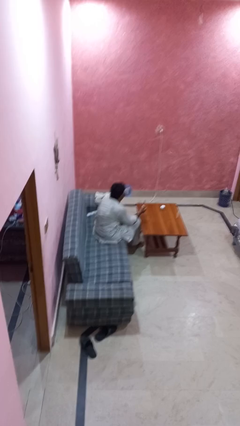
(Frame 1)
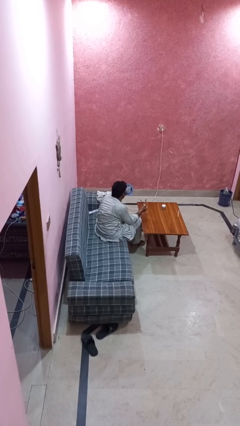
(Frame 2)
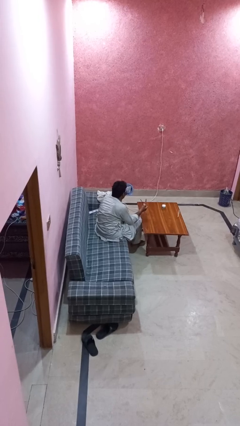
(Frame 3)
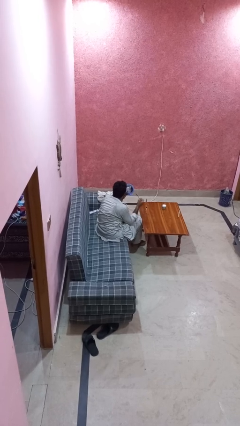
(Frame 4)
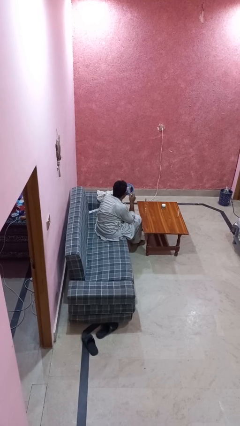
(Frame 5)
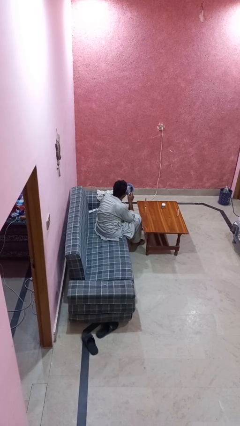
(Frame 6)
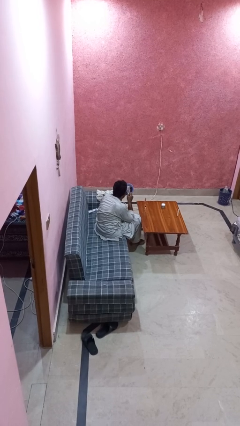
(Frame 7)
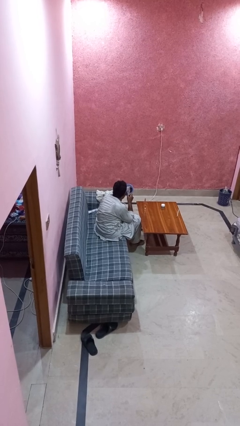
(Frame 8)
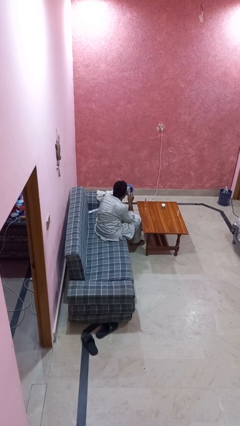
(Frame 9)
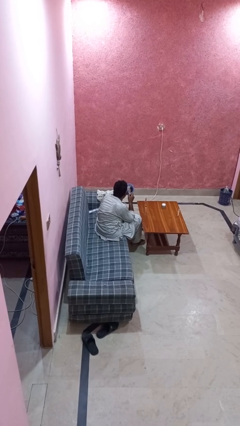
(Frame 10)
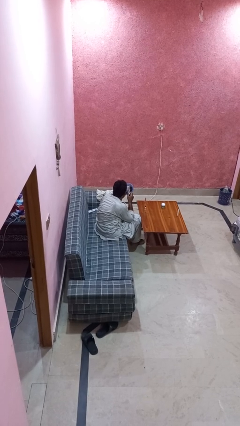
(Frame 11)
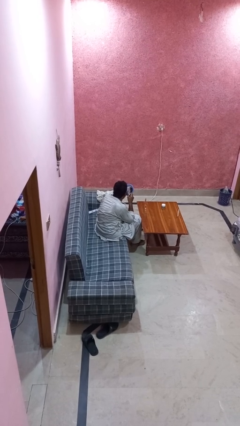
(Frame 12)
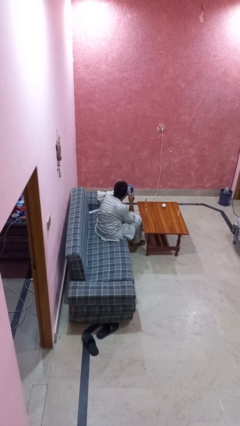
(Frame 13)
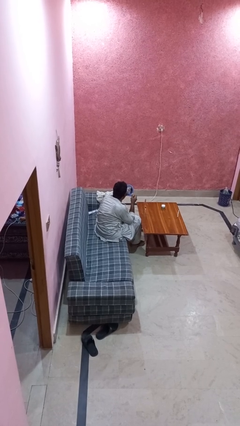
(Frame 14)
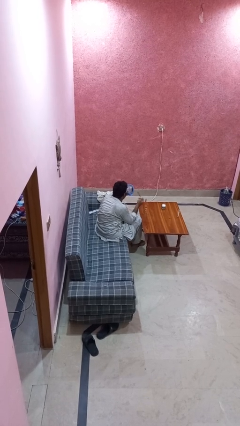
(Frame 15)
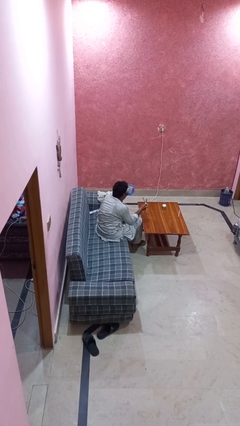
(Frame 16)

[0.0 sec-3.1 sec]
person applies eye makeup

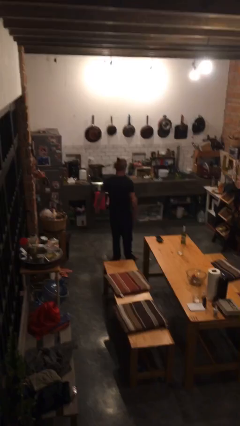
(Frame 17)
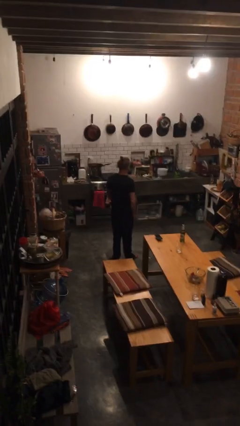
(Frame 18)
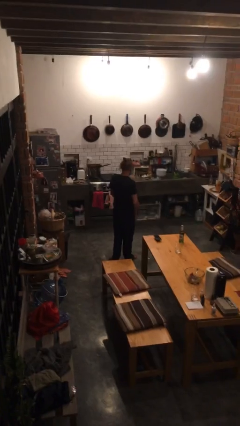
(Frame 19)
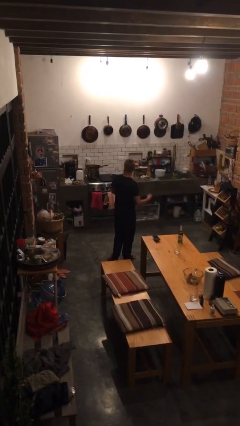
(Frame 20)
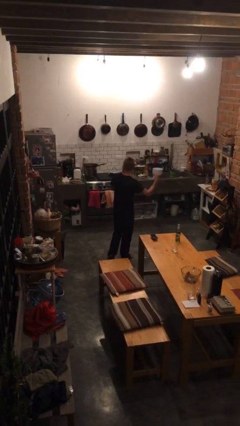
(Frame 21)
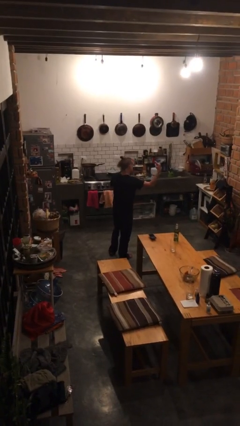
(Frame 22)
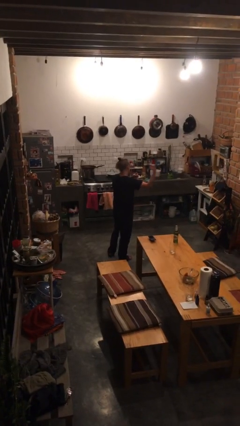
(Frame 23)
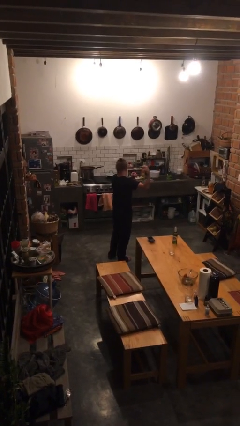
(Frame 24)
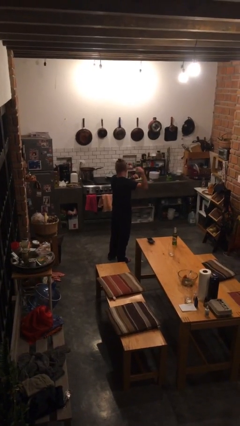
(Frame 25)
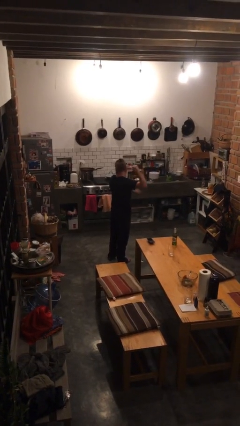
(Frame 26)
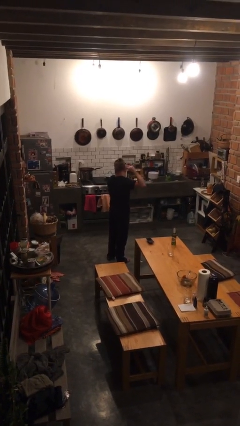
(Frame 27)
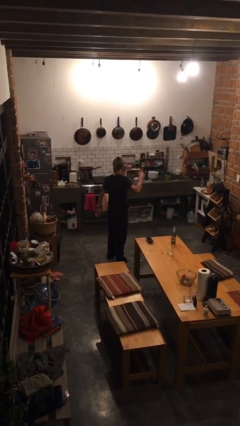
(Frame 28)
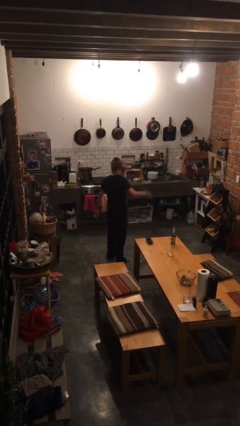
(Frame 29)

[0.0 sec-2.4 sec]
person gestures behind me

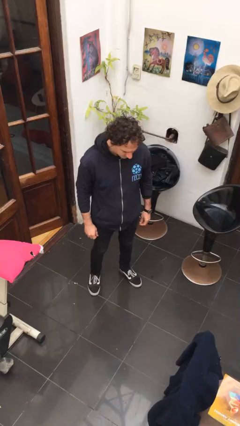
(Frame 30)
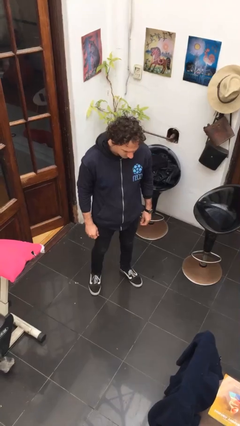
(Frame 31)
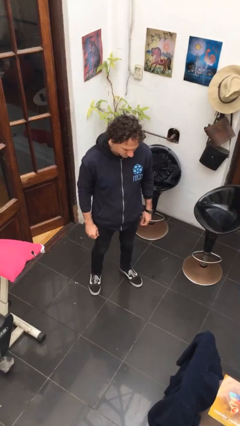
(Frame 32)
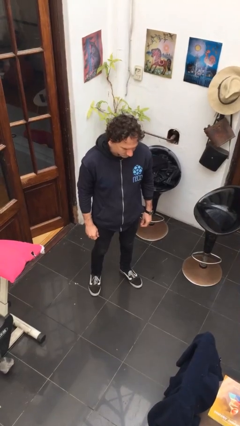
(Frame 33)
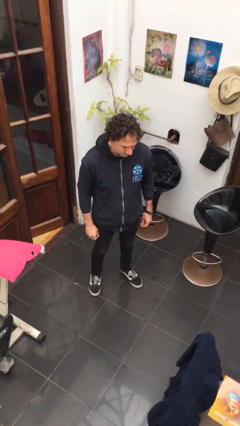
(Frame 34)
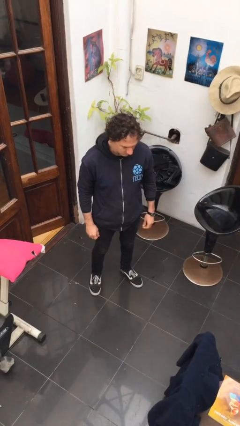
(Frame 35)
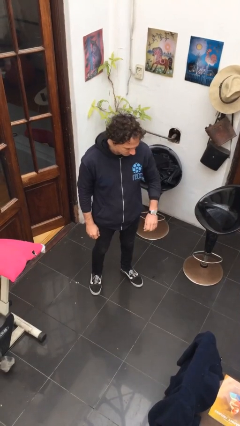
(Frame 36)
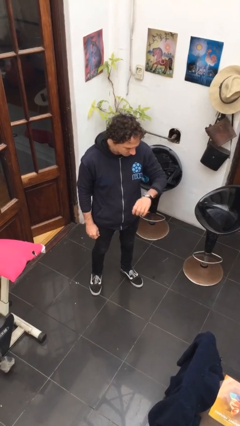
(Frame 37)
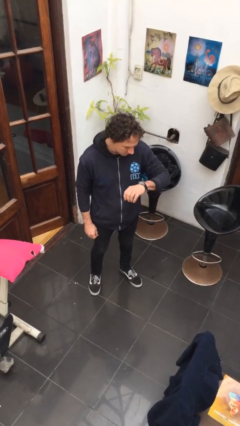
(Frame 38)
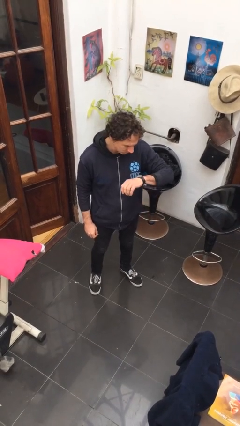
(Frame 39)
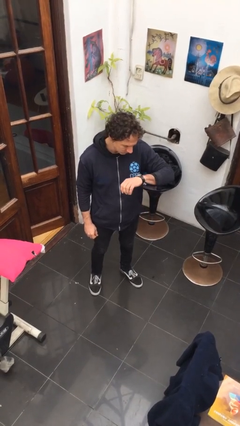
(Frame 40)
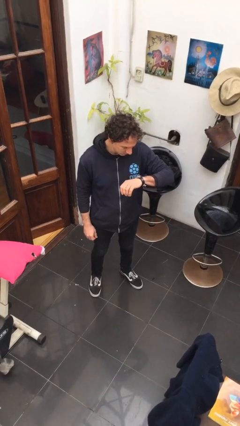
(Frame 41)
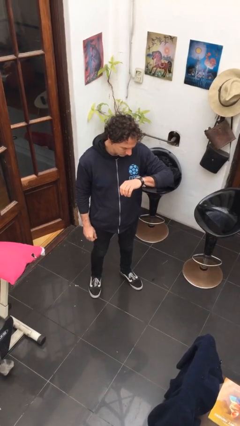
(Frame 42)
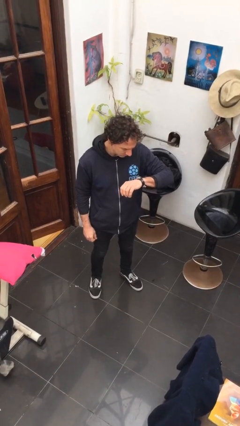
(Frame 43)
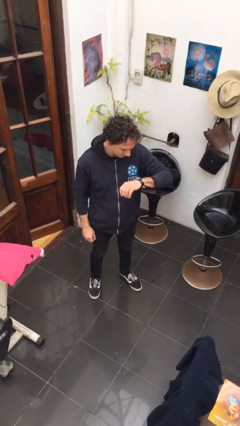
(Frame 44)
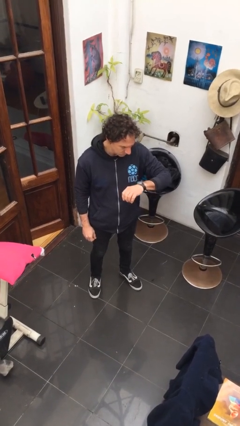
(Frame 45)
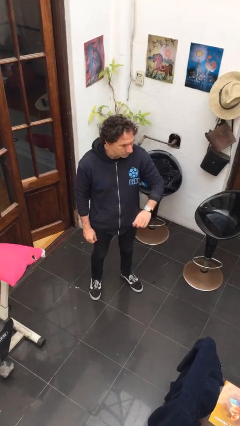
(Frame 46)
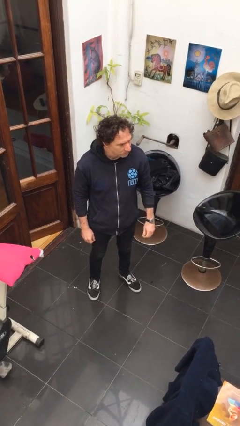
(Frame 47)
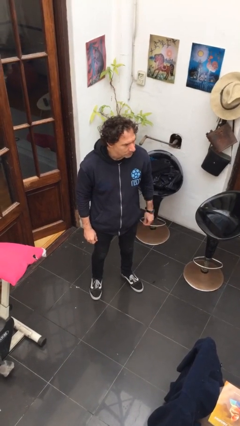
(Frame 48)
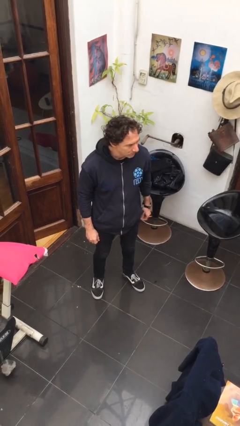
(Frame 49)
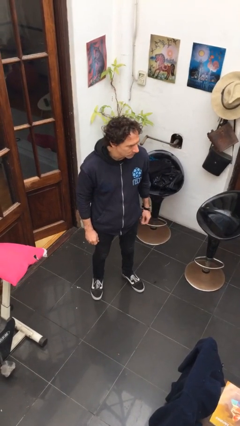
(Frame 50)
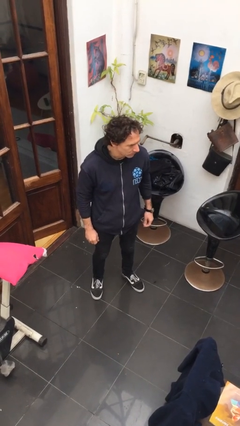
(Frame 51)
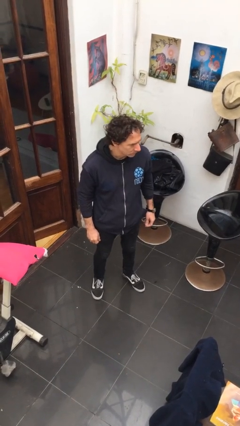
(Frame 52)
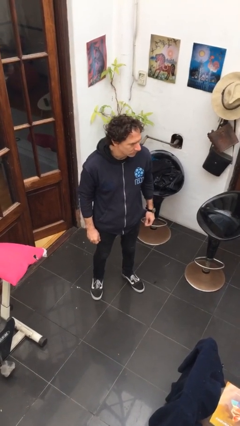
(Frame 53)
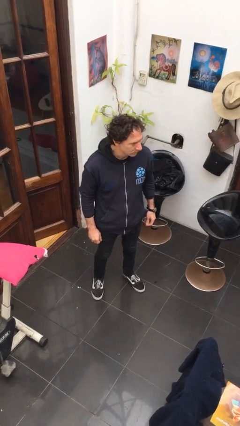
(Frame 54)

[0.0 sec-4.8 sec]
person looks at wristwatch

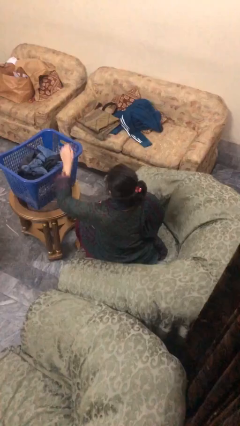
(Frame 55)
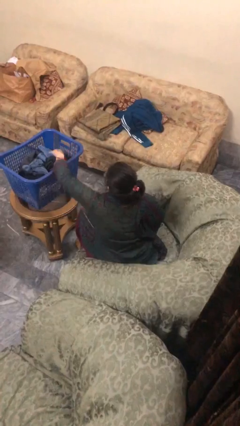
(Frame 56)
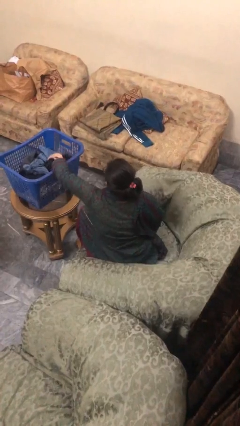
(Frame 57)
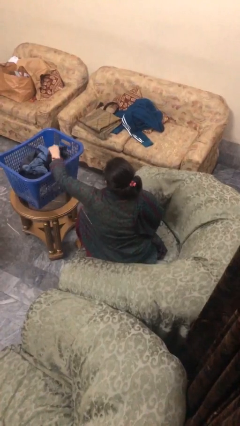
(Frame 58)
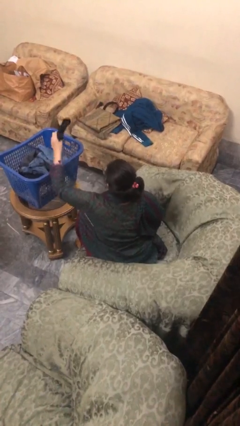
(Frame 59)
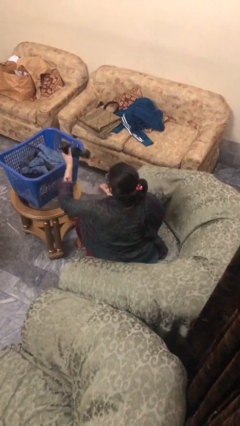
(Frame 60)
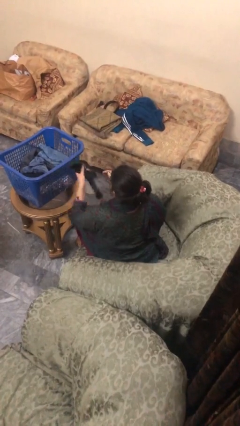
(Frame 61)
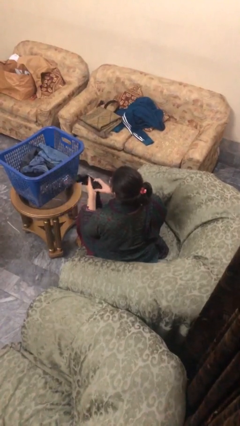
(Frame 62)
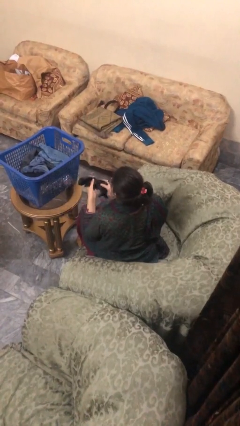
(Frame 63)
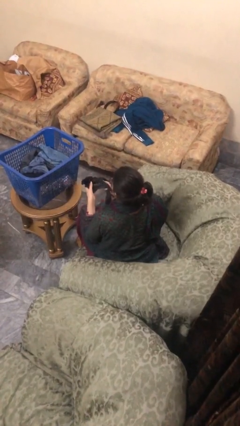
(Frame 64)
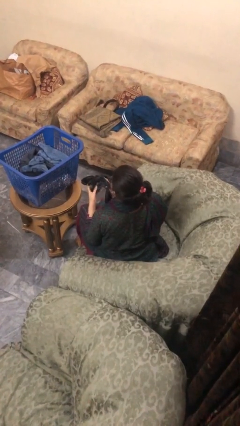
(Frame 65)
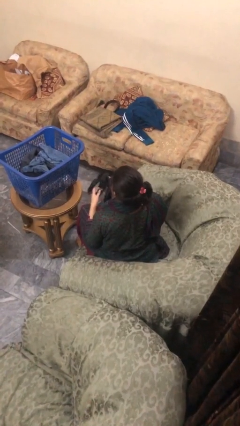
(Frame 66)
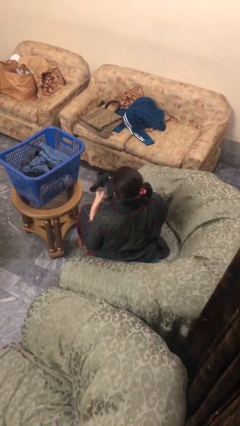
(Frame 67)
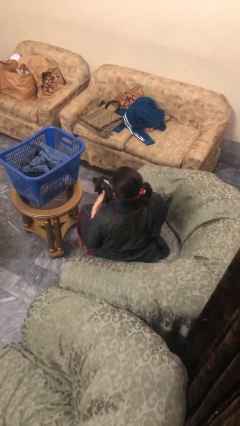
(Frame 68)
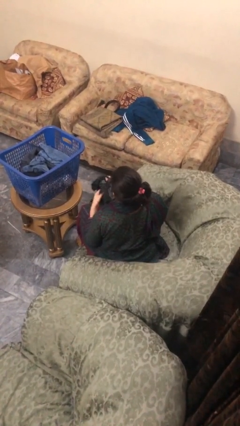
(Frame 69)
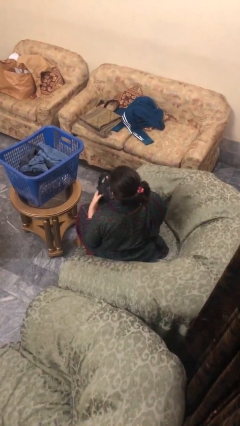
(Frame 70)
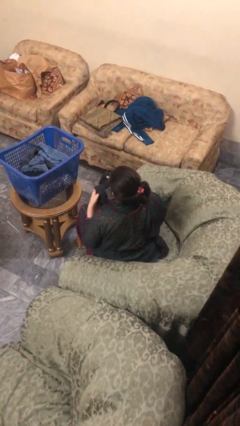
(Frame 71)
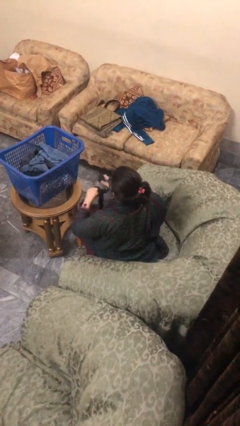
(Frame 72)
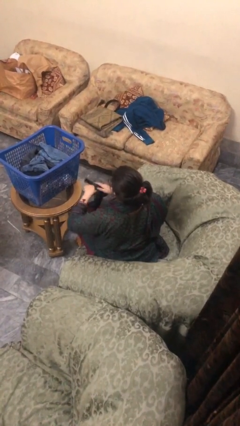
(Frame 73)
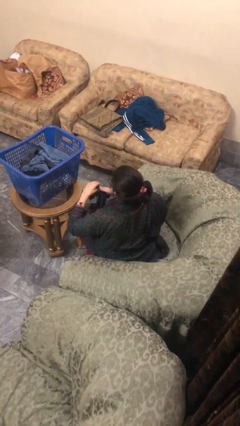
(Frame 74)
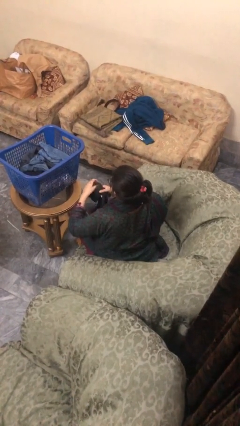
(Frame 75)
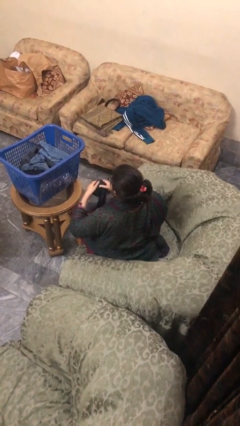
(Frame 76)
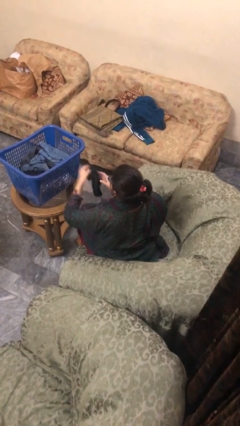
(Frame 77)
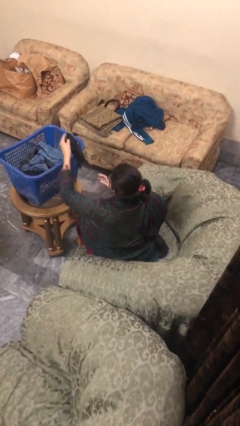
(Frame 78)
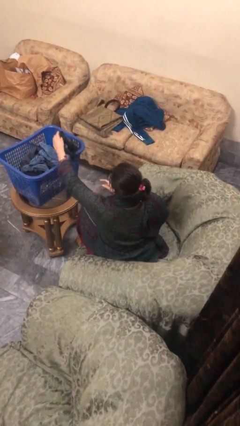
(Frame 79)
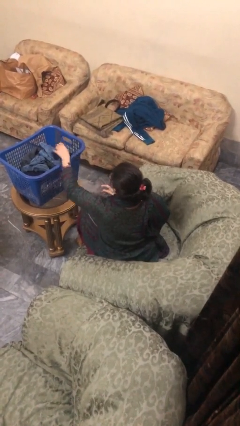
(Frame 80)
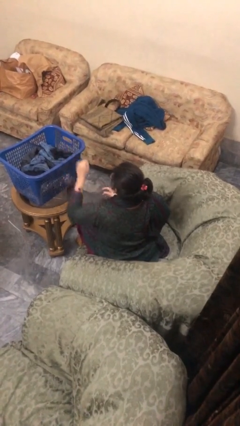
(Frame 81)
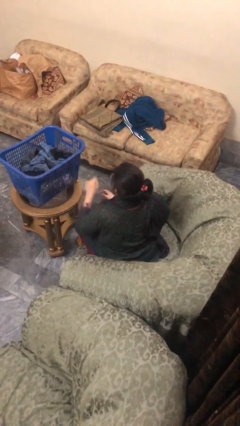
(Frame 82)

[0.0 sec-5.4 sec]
person folds socks

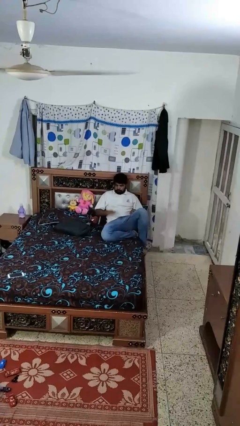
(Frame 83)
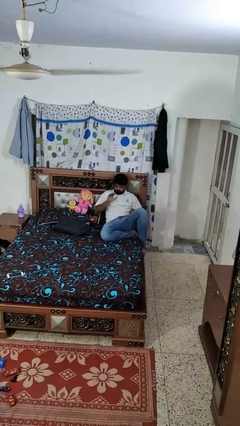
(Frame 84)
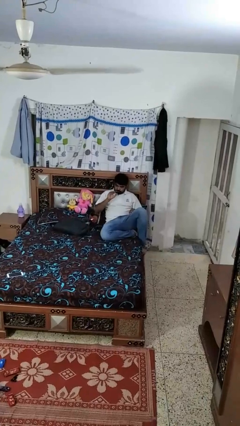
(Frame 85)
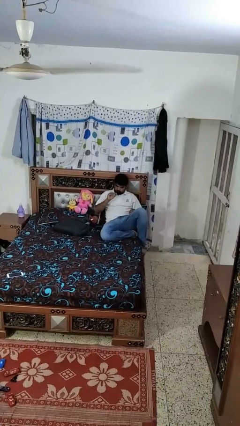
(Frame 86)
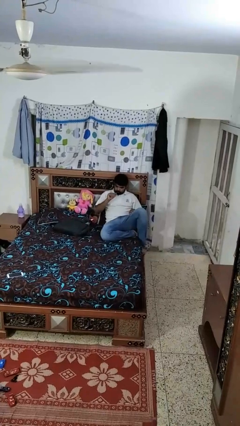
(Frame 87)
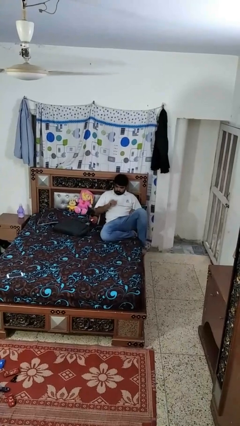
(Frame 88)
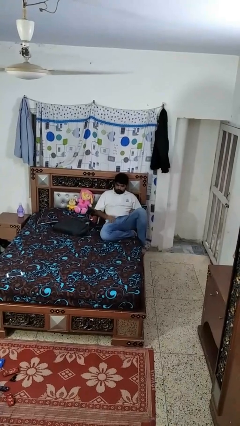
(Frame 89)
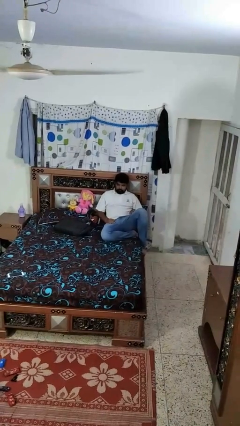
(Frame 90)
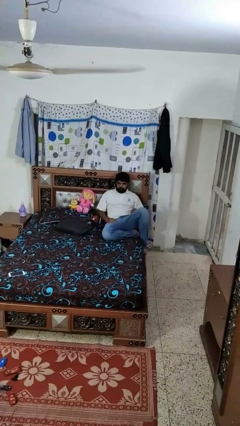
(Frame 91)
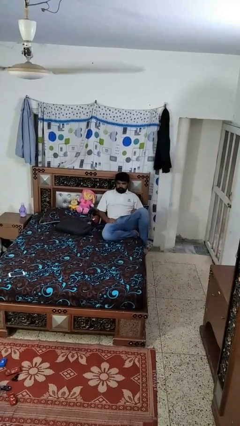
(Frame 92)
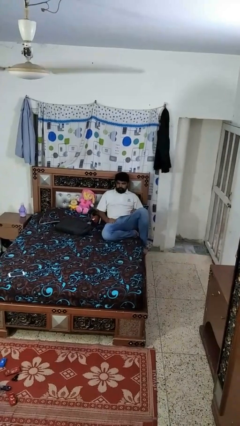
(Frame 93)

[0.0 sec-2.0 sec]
person gestures come here
